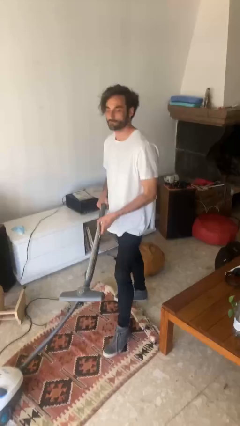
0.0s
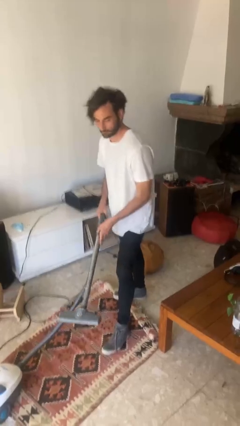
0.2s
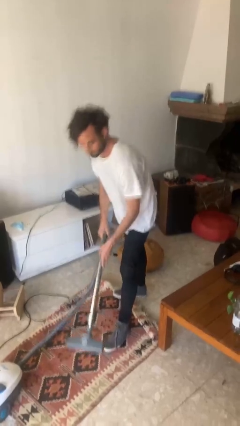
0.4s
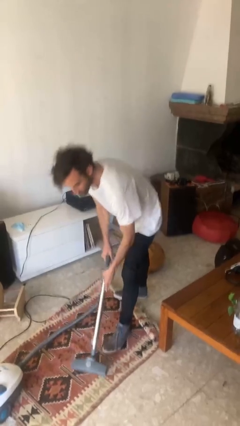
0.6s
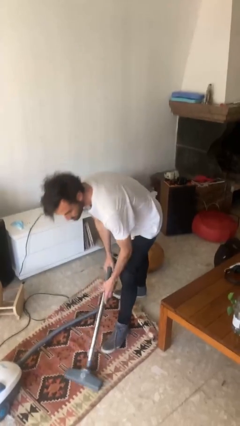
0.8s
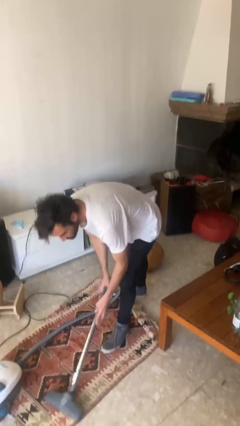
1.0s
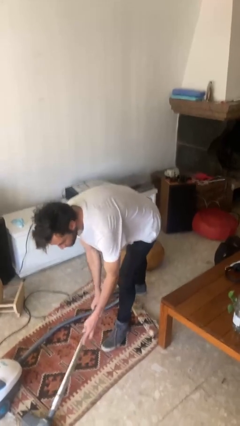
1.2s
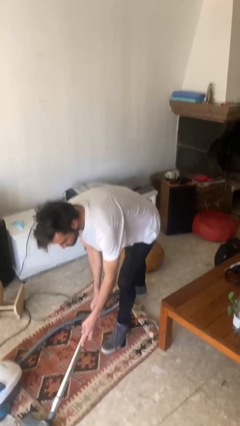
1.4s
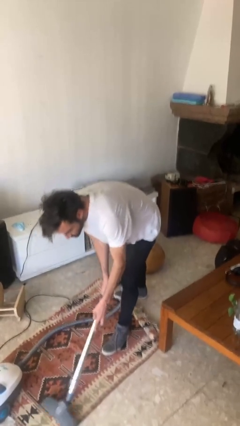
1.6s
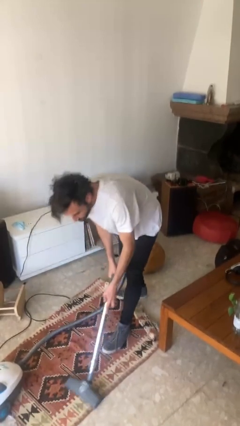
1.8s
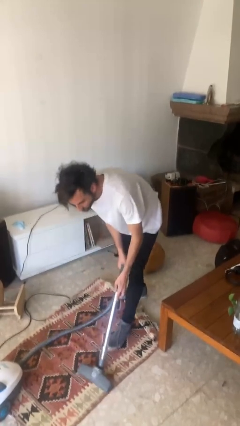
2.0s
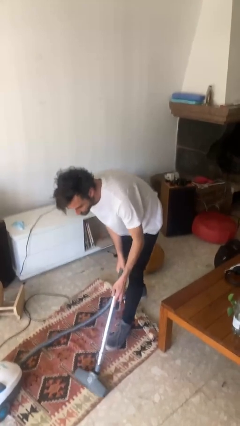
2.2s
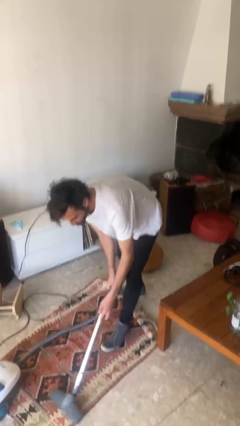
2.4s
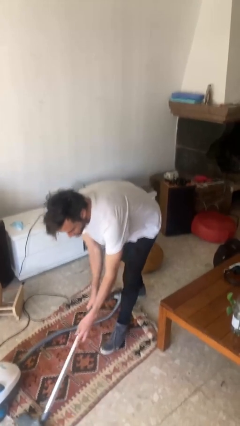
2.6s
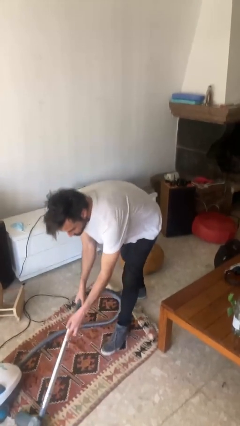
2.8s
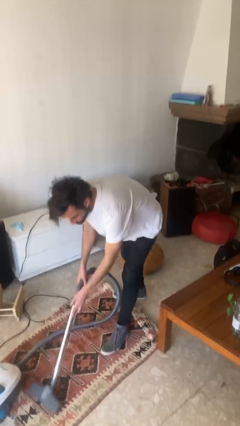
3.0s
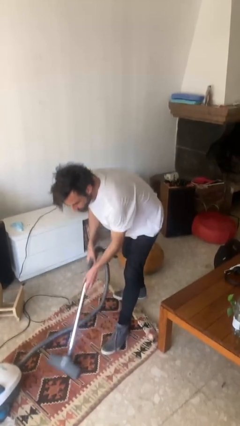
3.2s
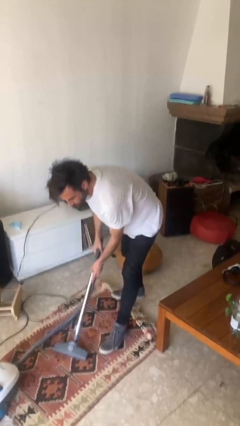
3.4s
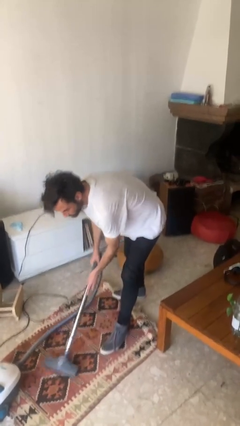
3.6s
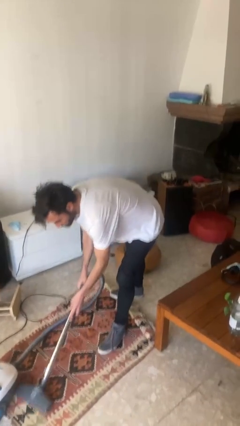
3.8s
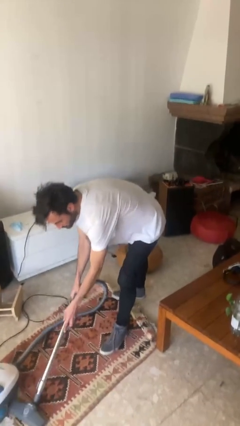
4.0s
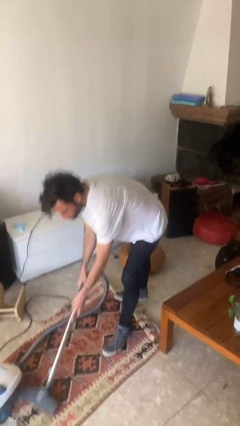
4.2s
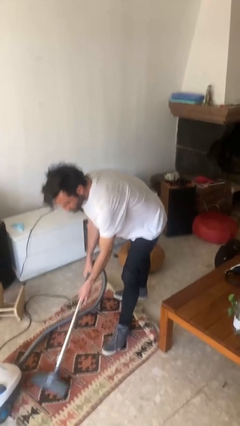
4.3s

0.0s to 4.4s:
person vacuums carpet

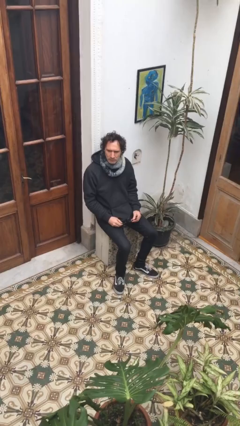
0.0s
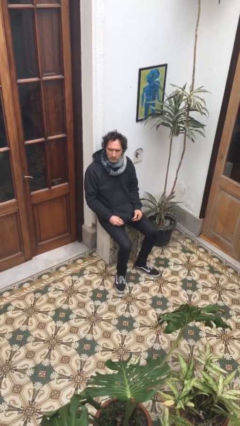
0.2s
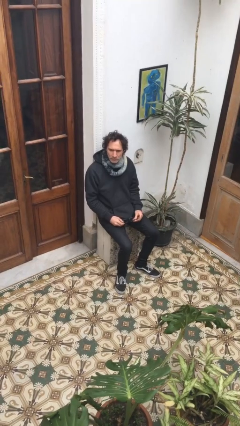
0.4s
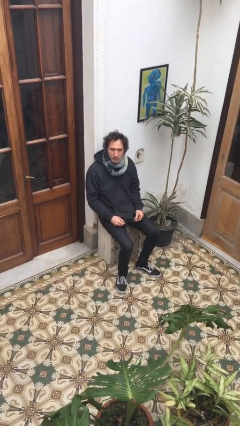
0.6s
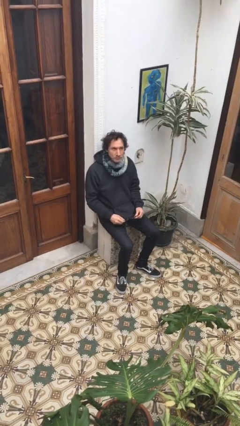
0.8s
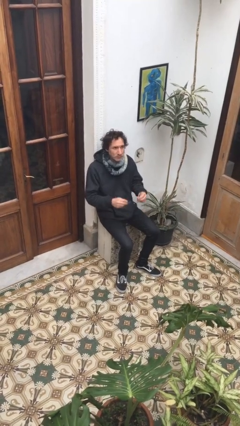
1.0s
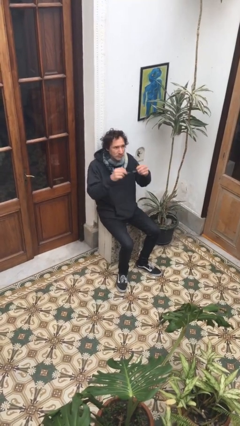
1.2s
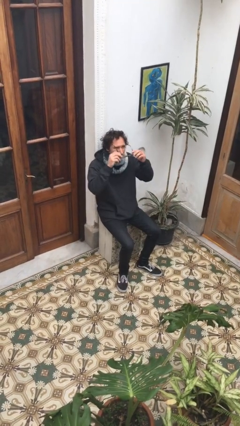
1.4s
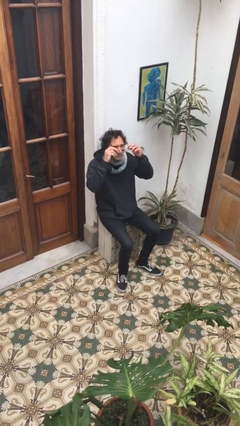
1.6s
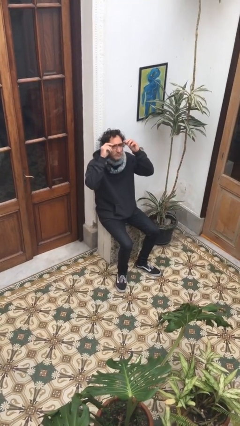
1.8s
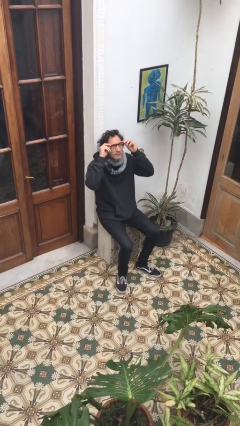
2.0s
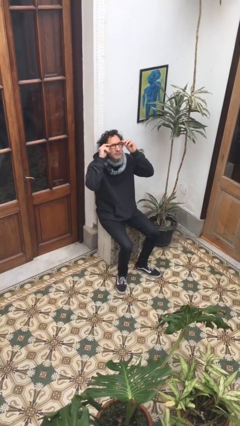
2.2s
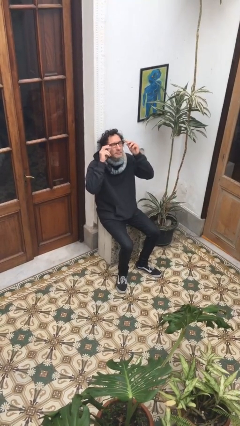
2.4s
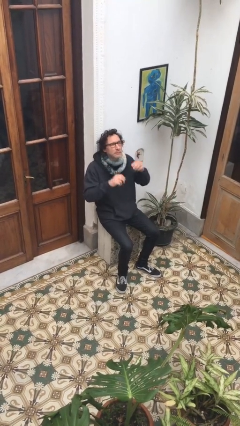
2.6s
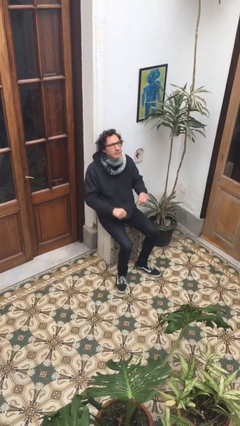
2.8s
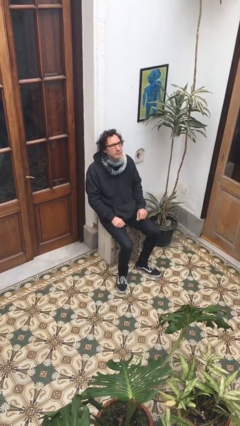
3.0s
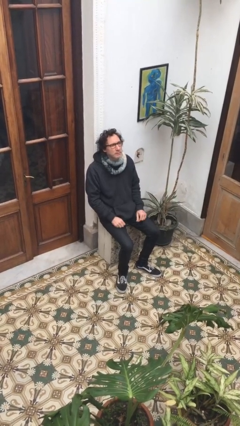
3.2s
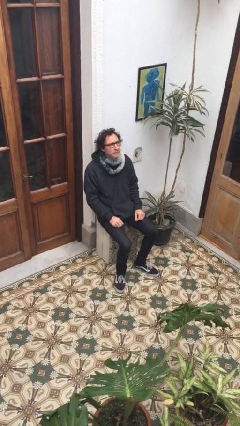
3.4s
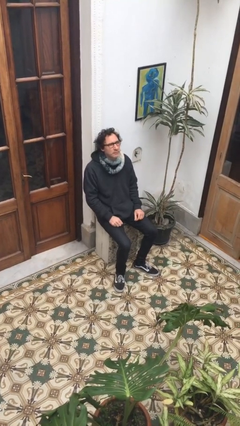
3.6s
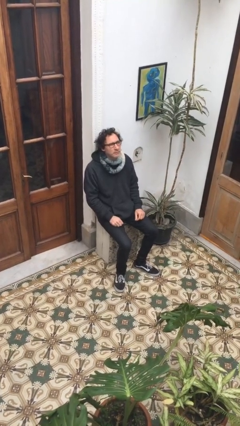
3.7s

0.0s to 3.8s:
person puts on glasses

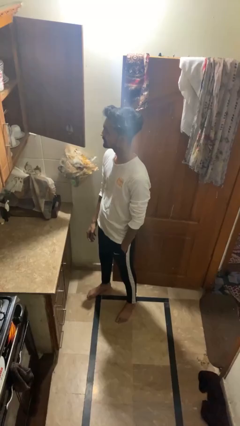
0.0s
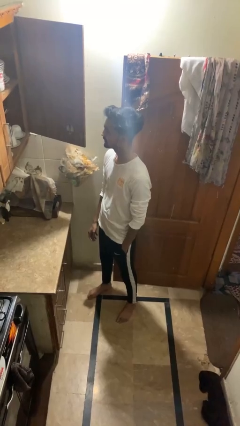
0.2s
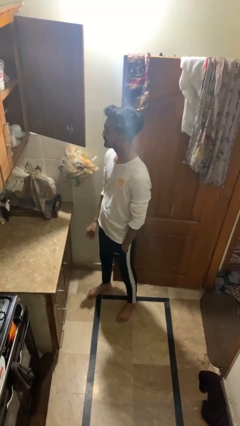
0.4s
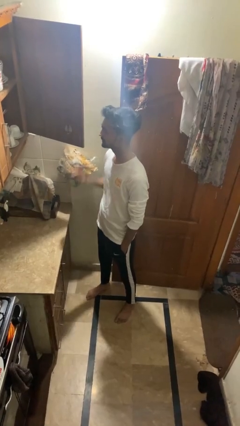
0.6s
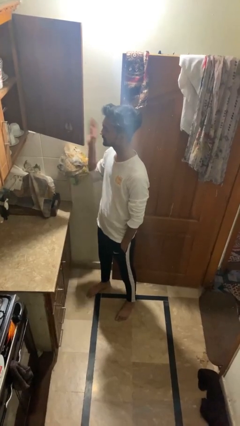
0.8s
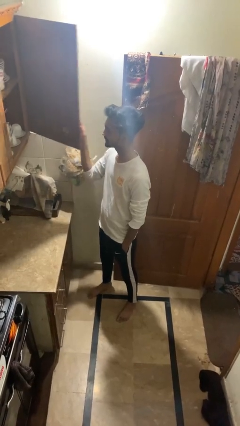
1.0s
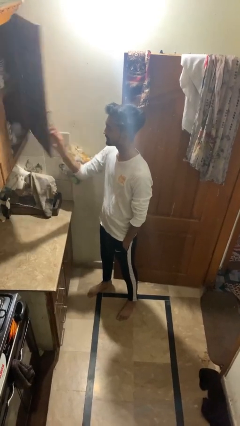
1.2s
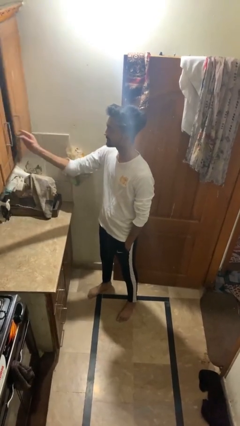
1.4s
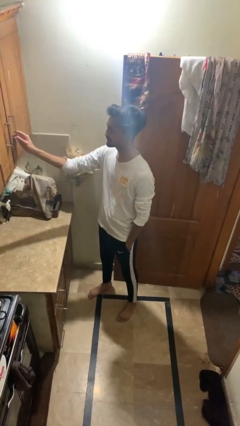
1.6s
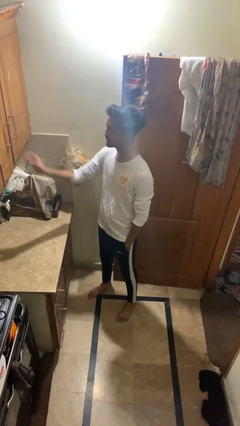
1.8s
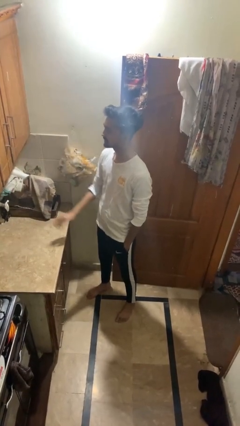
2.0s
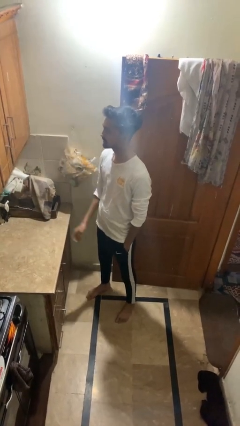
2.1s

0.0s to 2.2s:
person closes cabinet

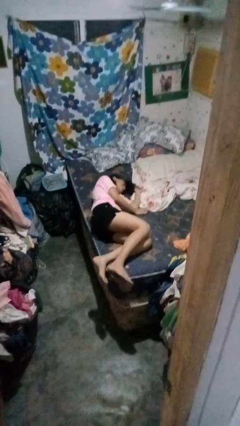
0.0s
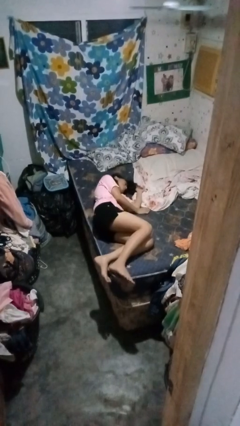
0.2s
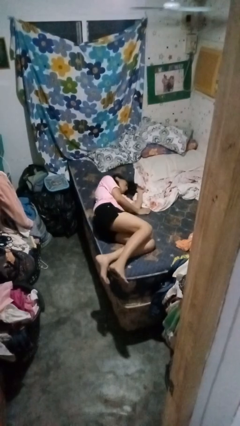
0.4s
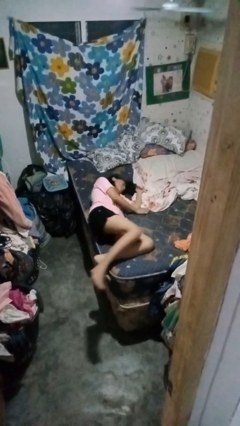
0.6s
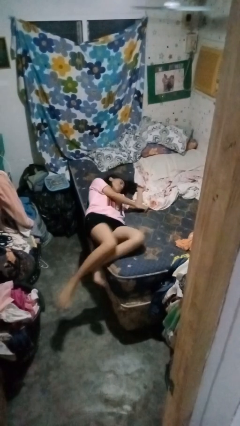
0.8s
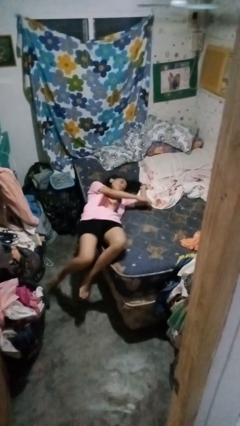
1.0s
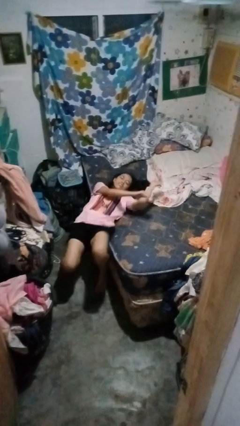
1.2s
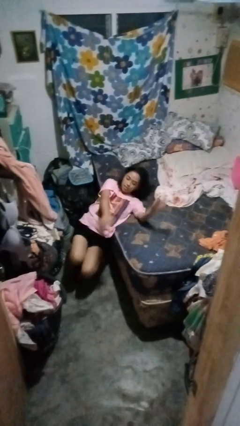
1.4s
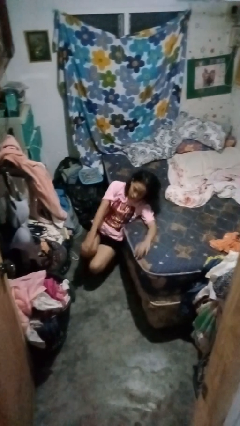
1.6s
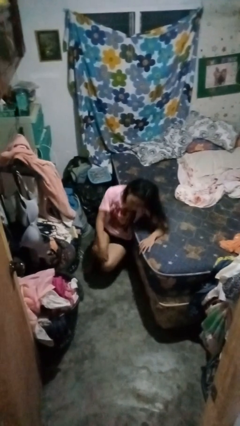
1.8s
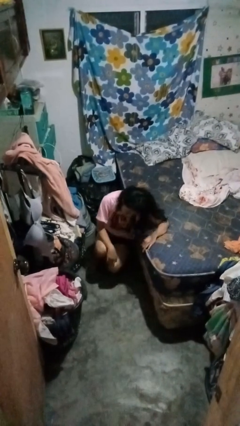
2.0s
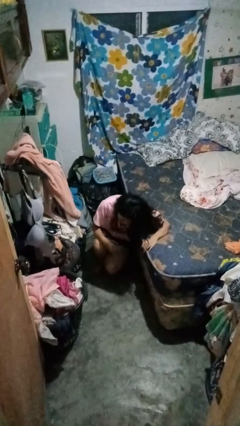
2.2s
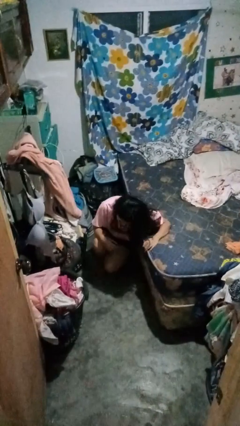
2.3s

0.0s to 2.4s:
person falls from bed

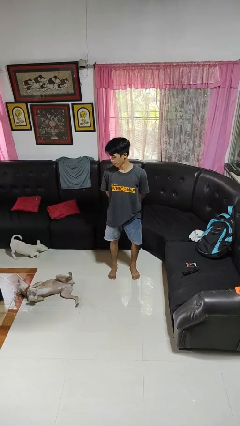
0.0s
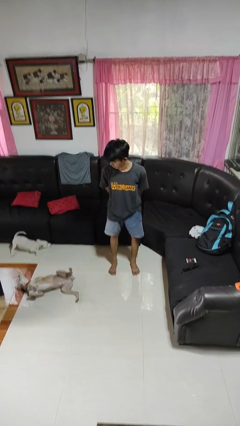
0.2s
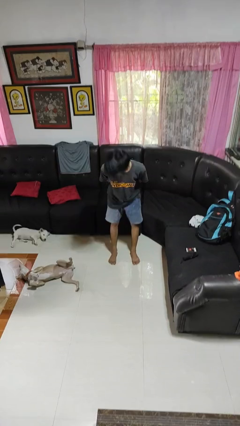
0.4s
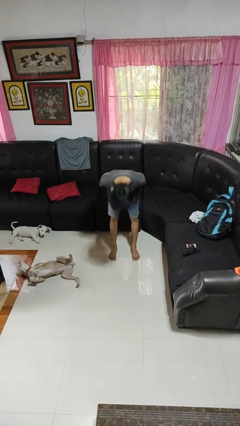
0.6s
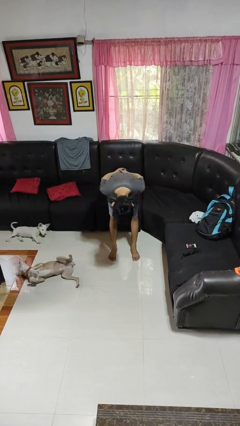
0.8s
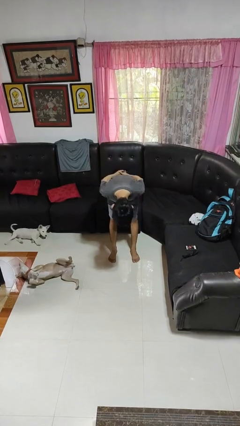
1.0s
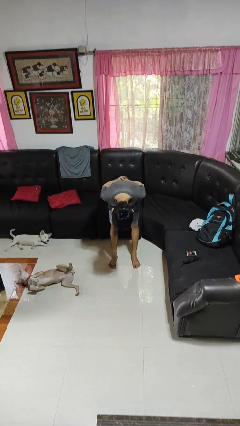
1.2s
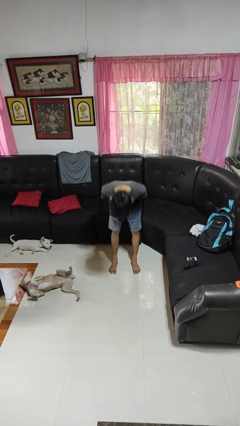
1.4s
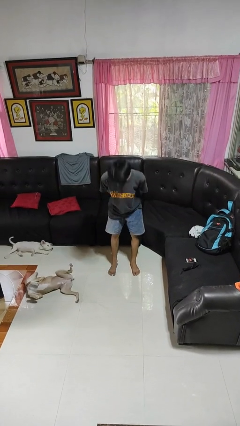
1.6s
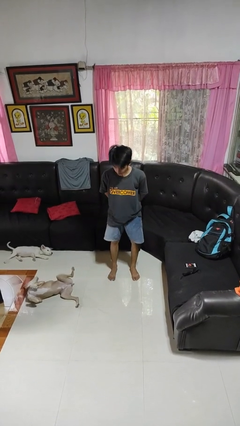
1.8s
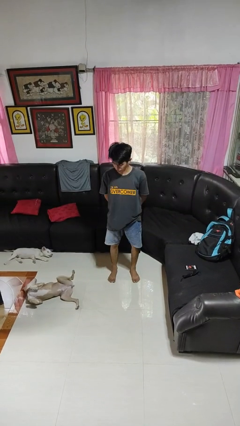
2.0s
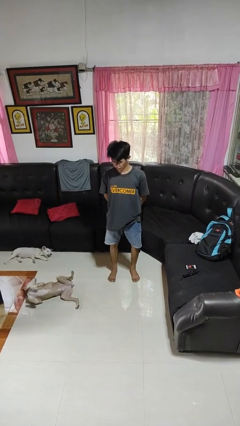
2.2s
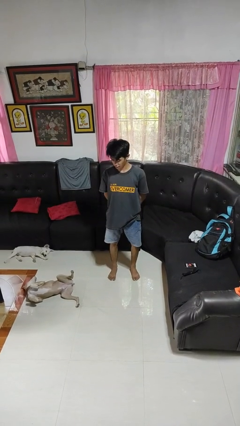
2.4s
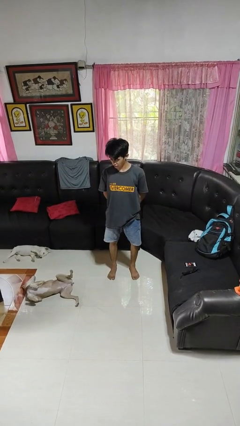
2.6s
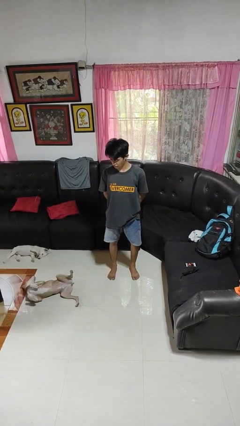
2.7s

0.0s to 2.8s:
person bows

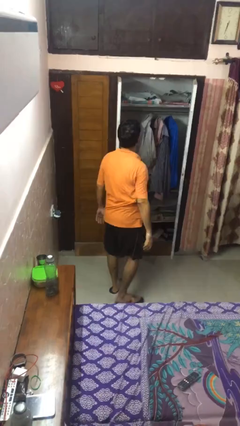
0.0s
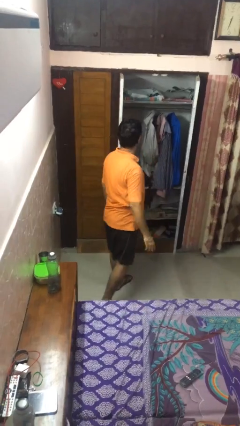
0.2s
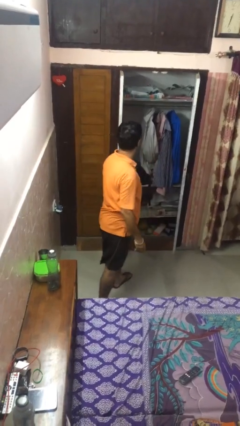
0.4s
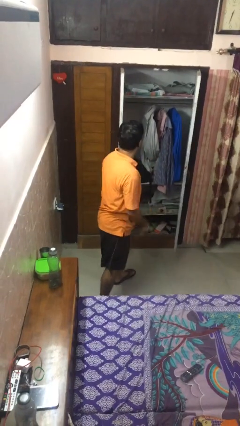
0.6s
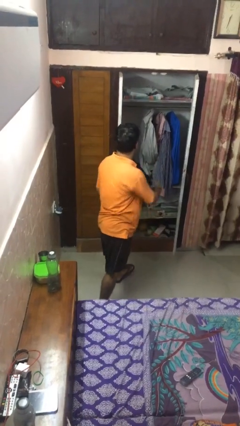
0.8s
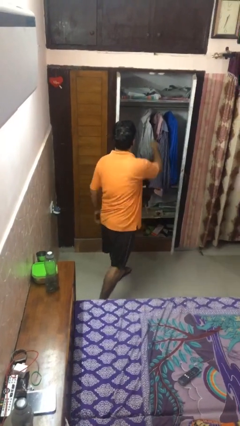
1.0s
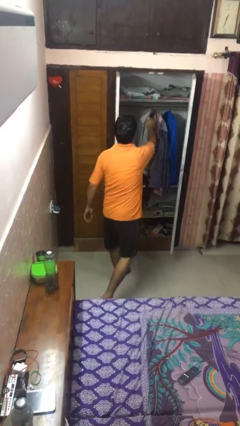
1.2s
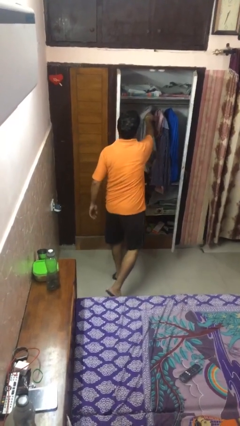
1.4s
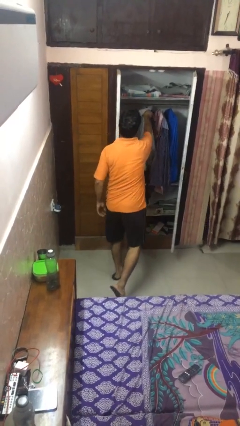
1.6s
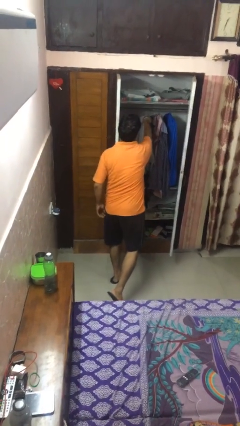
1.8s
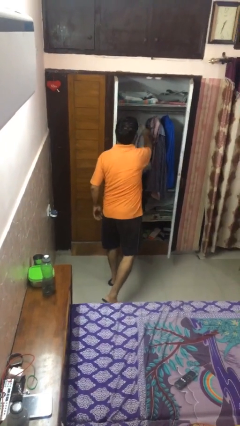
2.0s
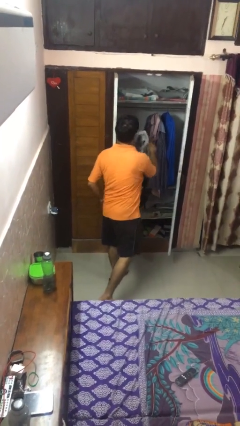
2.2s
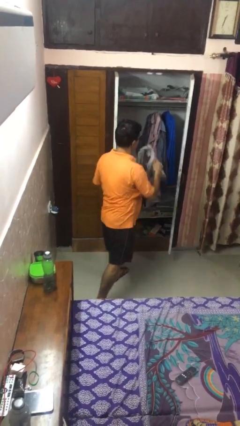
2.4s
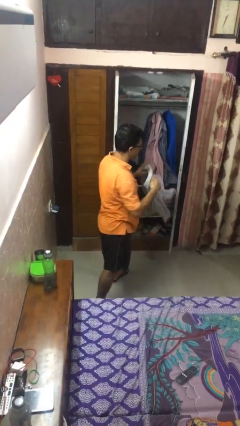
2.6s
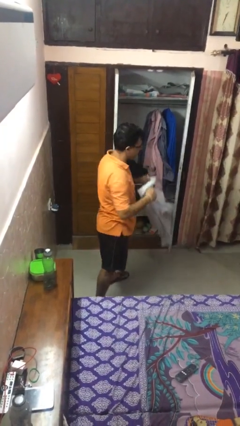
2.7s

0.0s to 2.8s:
person takes clothes from closet
